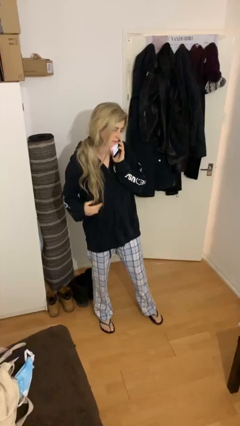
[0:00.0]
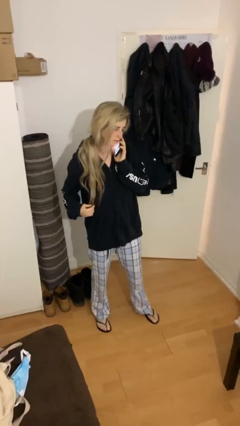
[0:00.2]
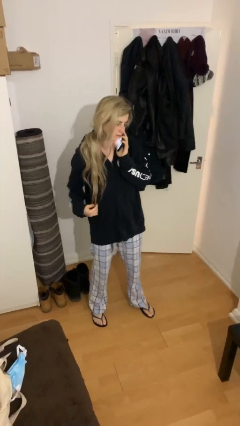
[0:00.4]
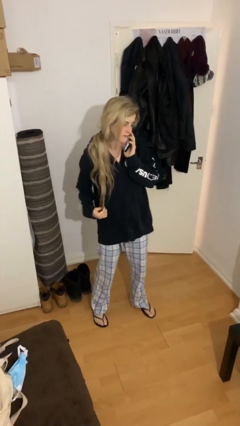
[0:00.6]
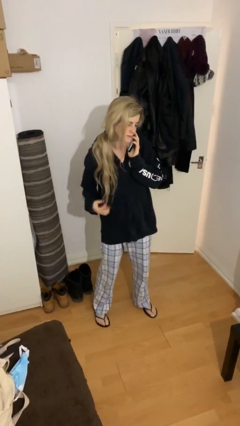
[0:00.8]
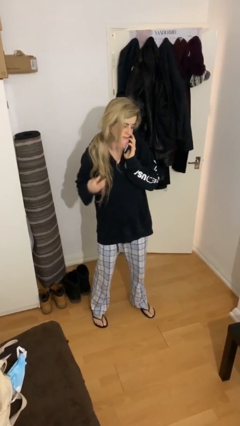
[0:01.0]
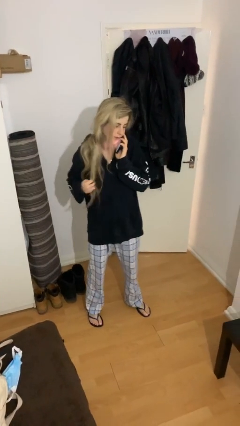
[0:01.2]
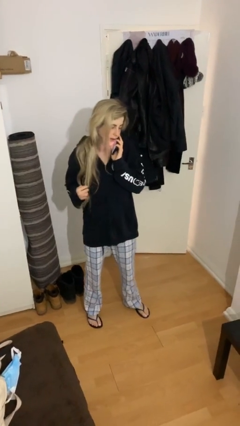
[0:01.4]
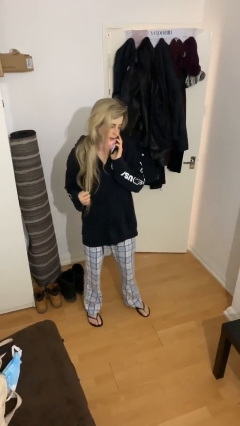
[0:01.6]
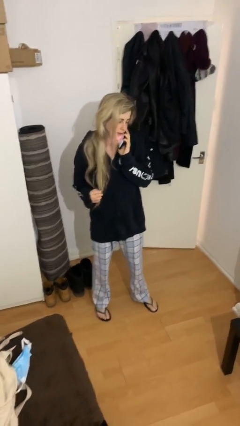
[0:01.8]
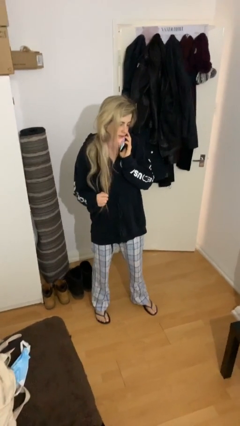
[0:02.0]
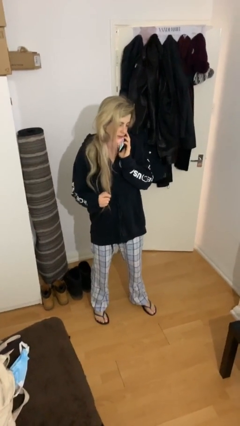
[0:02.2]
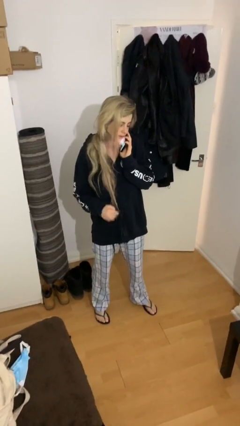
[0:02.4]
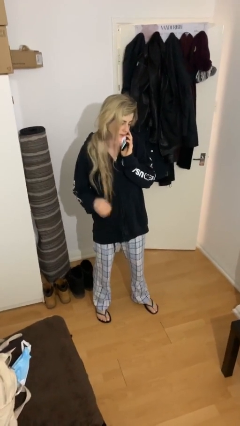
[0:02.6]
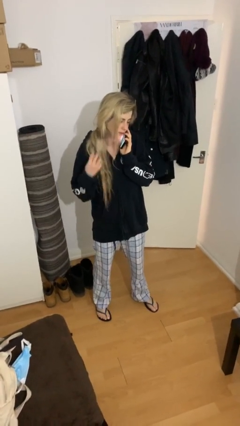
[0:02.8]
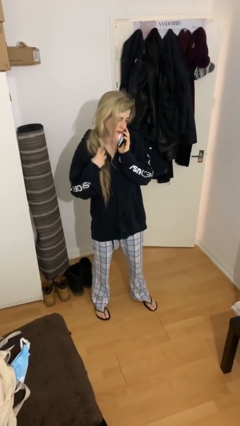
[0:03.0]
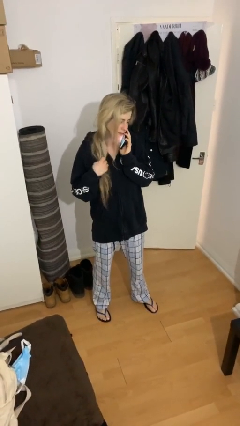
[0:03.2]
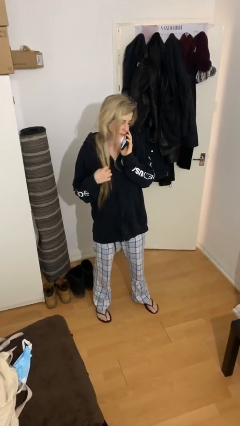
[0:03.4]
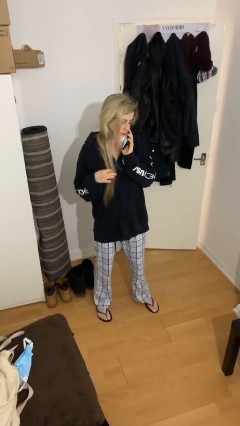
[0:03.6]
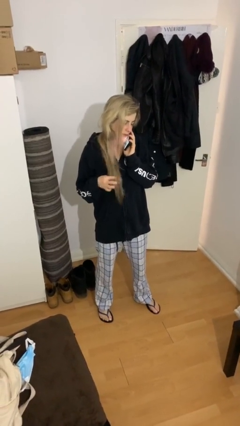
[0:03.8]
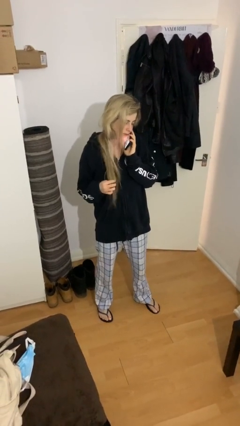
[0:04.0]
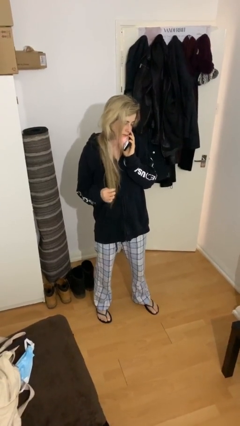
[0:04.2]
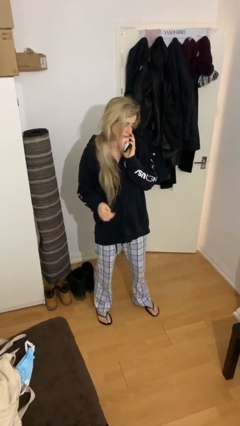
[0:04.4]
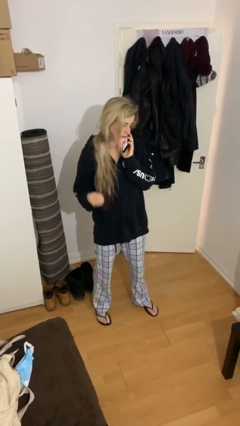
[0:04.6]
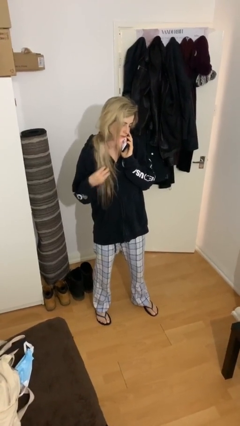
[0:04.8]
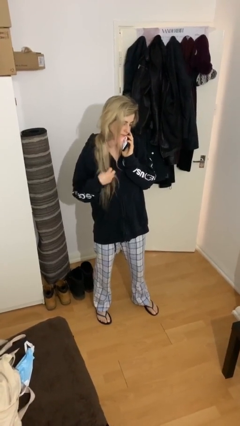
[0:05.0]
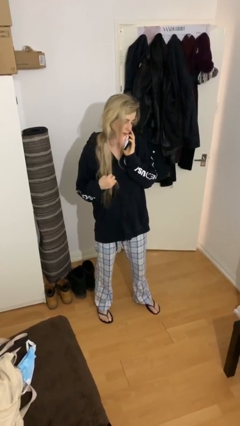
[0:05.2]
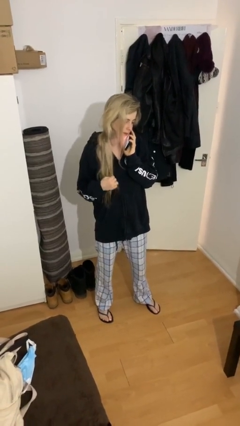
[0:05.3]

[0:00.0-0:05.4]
person talks on phone

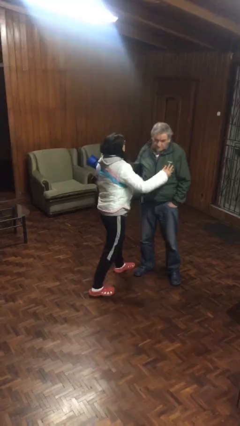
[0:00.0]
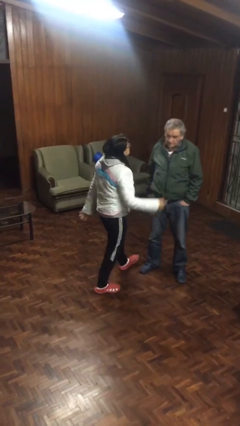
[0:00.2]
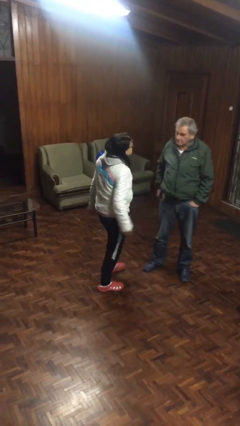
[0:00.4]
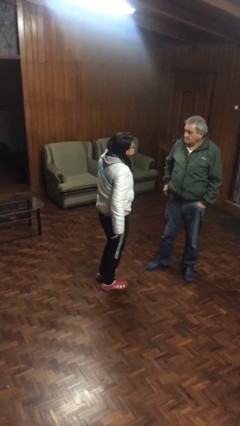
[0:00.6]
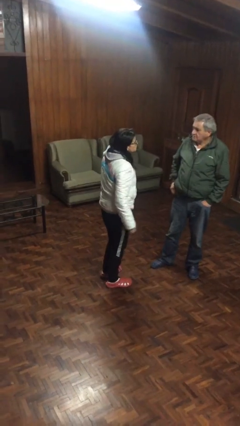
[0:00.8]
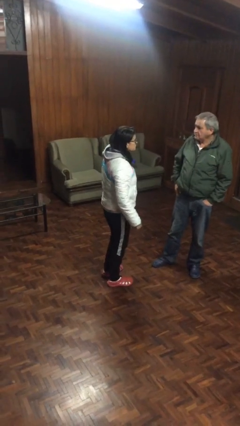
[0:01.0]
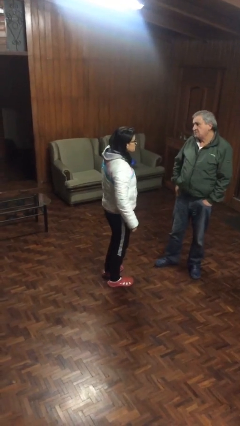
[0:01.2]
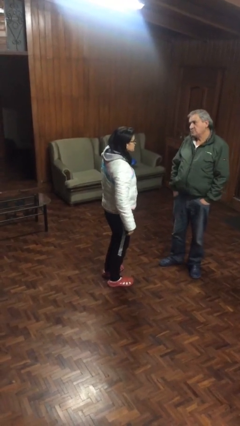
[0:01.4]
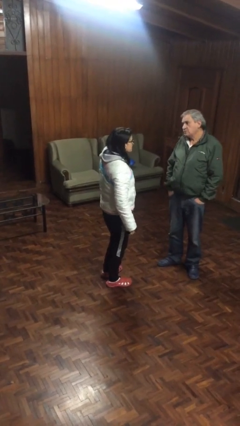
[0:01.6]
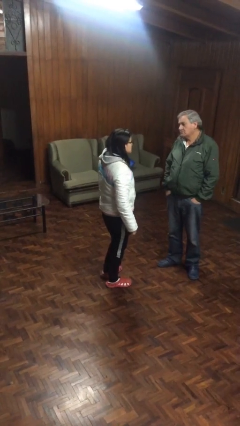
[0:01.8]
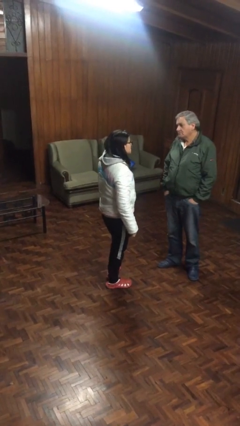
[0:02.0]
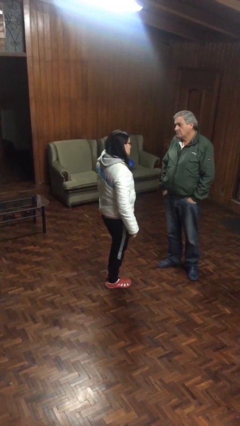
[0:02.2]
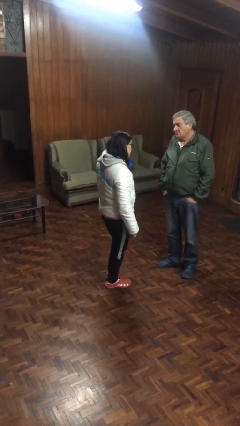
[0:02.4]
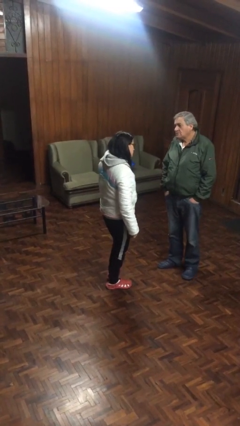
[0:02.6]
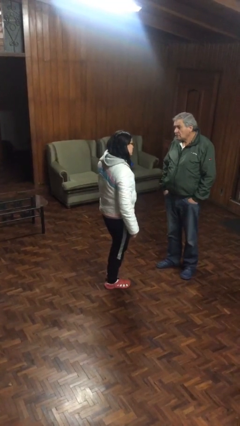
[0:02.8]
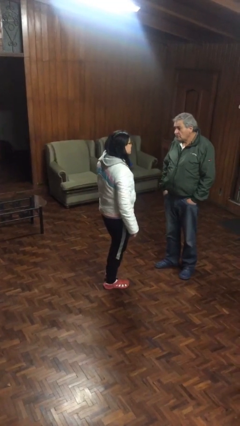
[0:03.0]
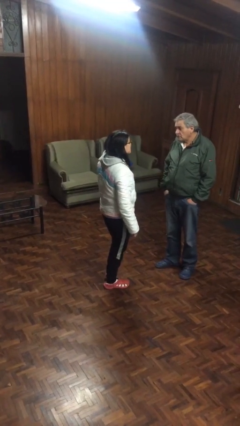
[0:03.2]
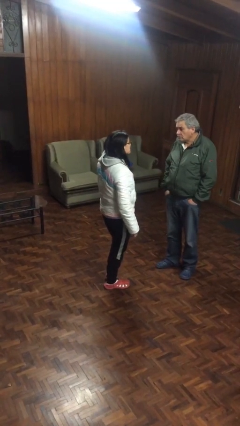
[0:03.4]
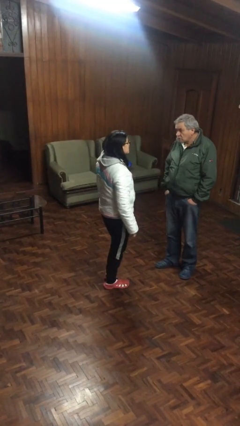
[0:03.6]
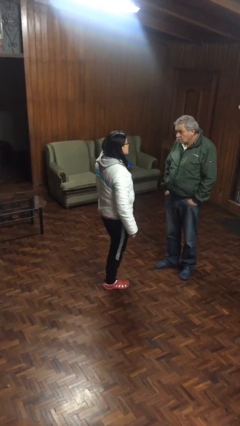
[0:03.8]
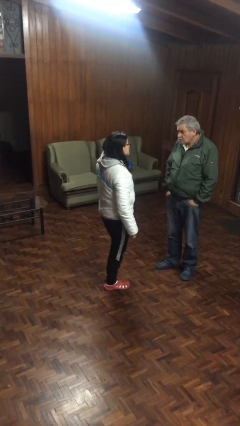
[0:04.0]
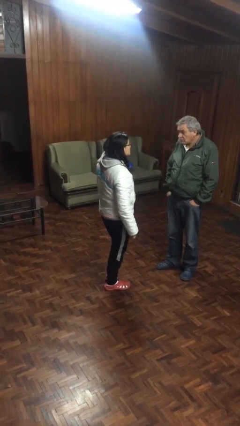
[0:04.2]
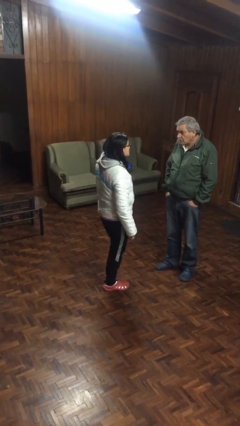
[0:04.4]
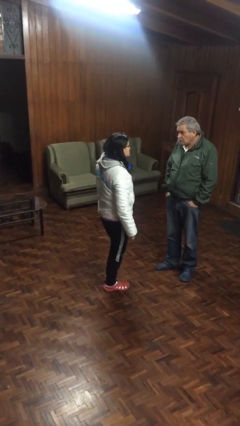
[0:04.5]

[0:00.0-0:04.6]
person talks to person

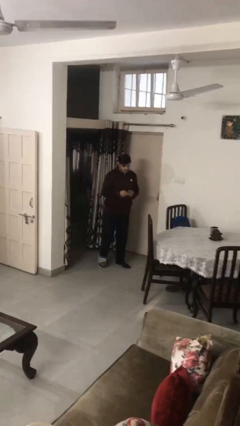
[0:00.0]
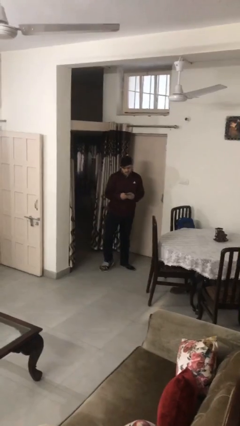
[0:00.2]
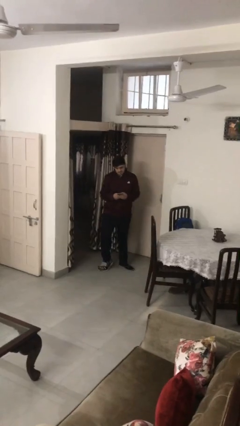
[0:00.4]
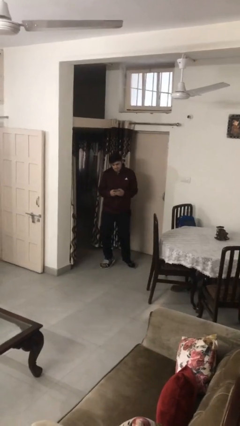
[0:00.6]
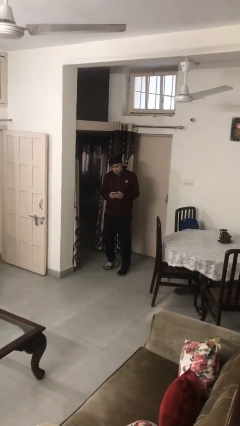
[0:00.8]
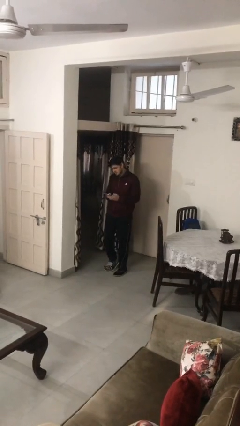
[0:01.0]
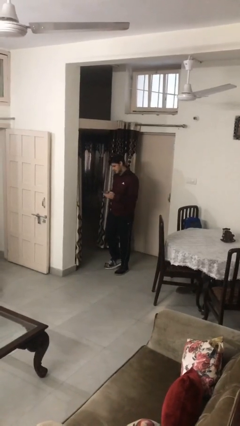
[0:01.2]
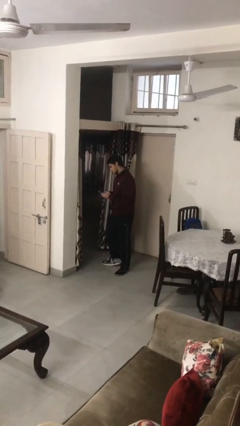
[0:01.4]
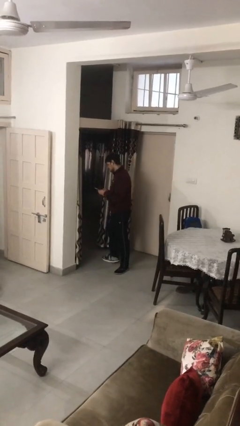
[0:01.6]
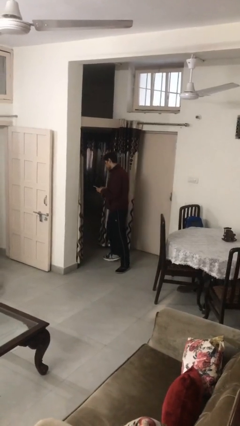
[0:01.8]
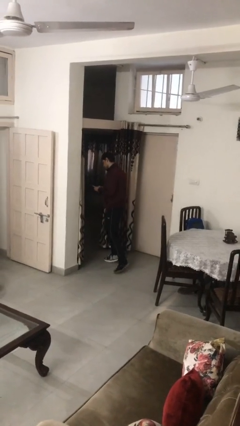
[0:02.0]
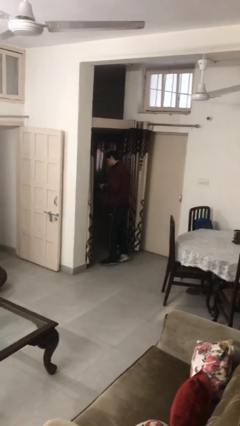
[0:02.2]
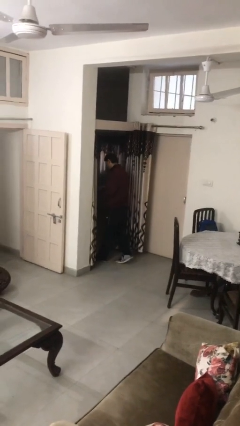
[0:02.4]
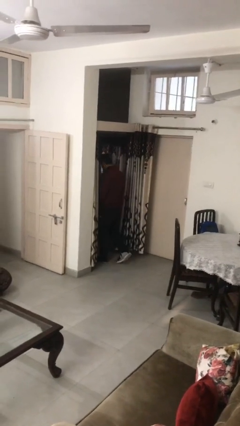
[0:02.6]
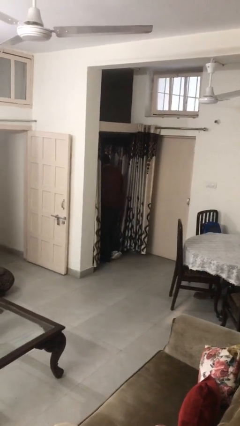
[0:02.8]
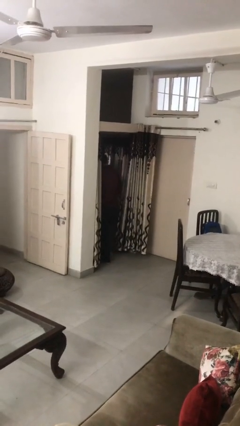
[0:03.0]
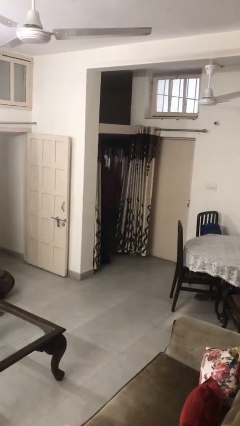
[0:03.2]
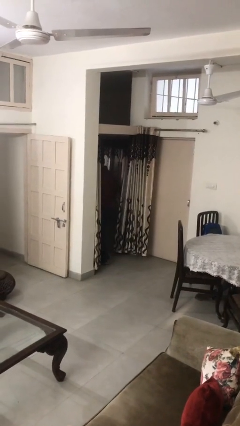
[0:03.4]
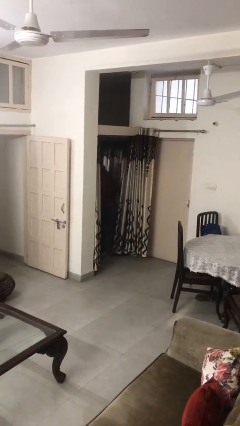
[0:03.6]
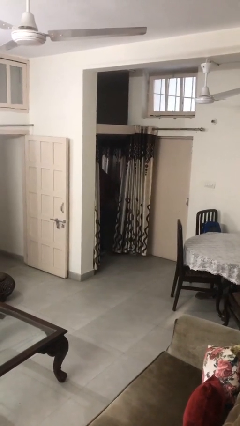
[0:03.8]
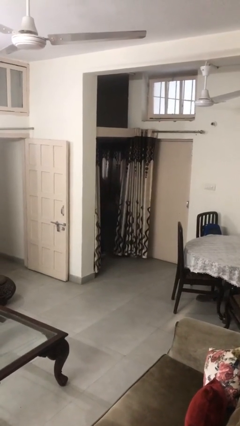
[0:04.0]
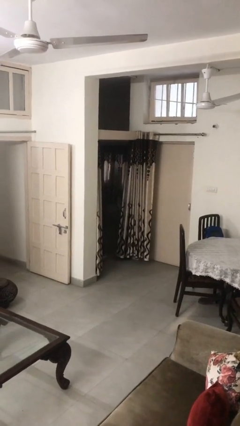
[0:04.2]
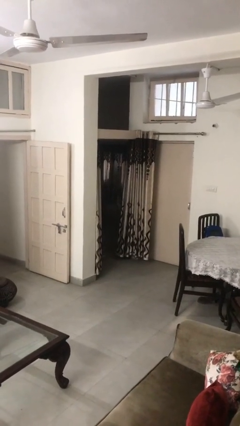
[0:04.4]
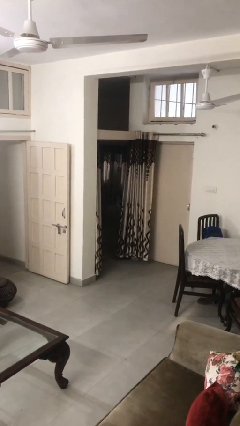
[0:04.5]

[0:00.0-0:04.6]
person exits scene through structure

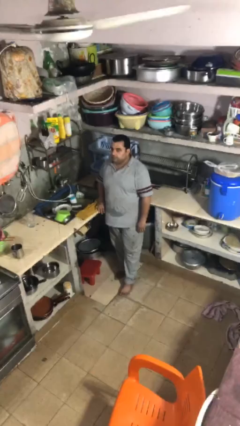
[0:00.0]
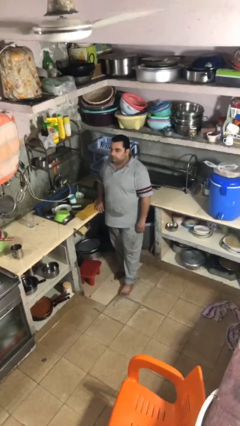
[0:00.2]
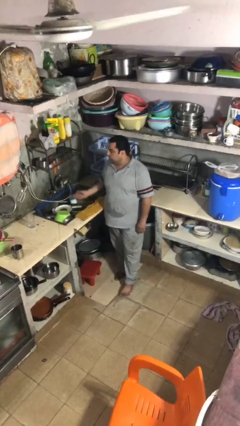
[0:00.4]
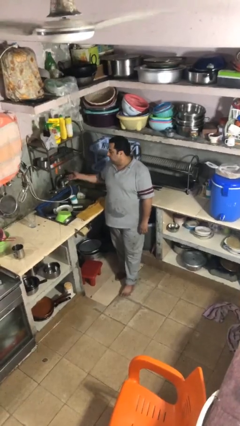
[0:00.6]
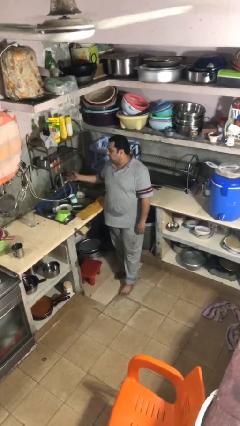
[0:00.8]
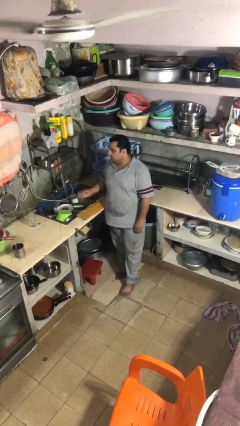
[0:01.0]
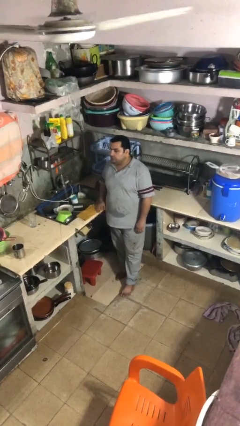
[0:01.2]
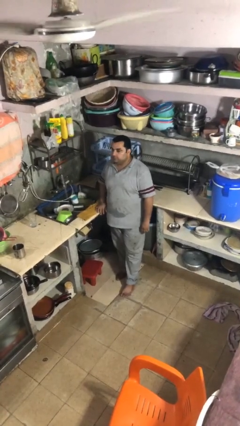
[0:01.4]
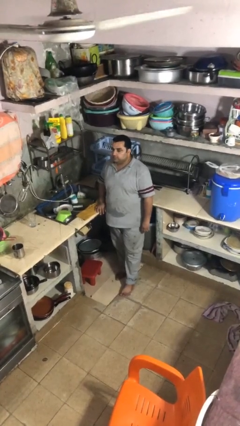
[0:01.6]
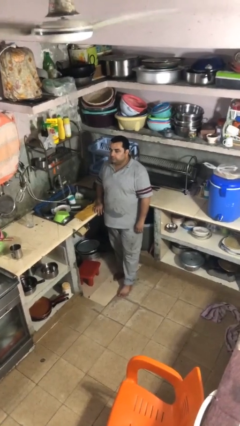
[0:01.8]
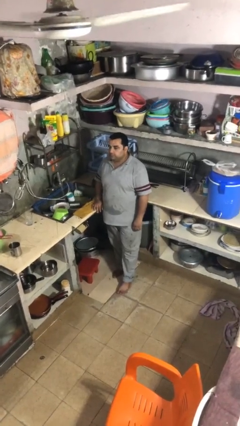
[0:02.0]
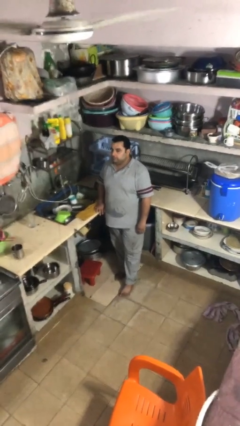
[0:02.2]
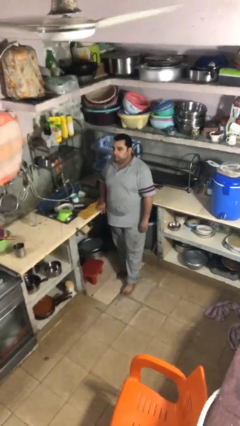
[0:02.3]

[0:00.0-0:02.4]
person turns on faucet

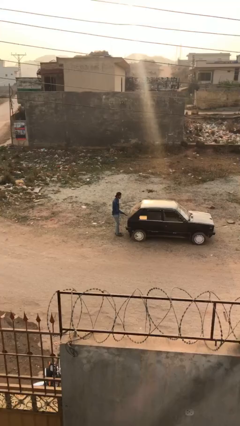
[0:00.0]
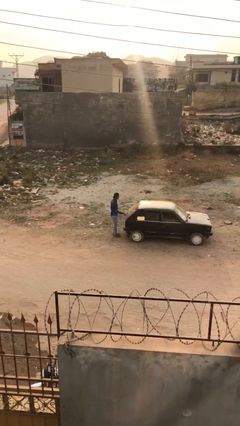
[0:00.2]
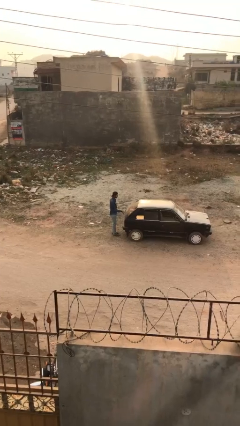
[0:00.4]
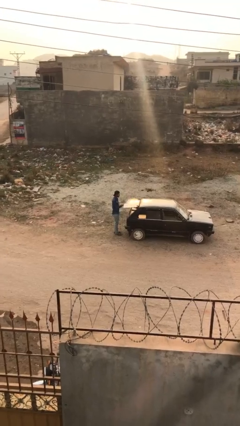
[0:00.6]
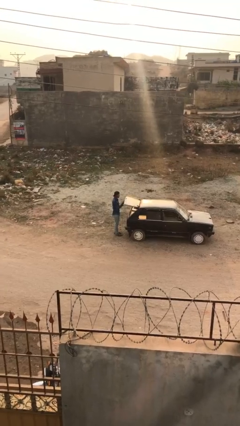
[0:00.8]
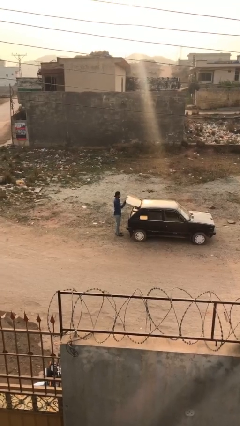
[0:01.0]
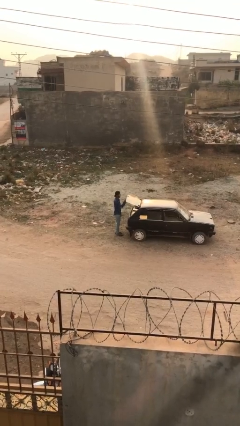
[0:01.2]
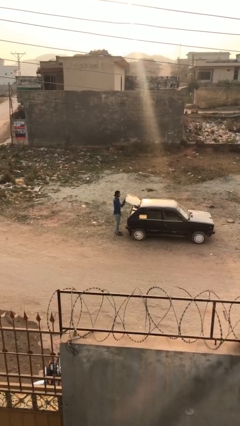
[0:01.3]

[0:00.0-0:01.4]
person opens car trunk
